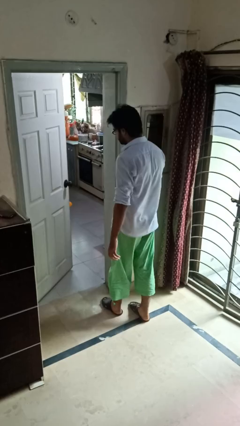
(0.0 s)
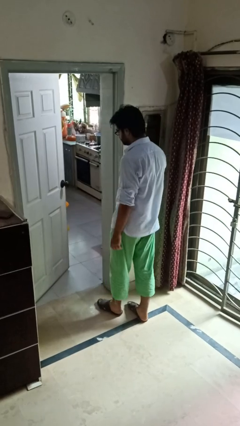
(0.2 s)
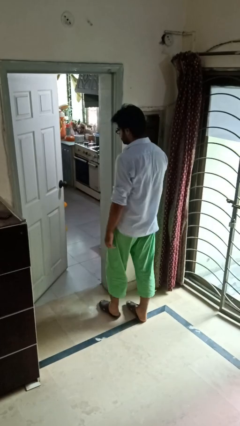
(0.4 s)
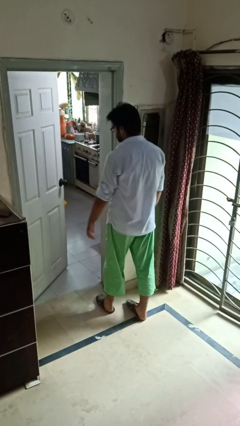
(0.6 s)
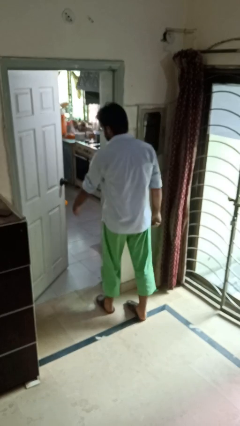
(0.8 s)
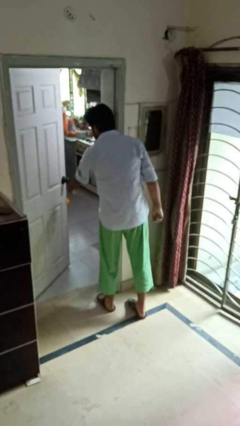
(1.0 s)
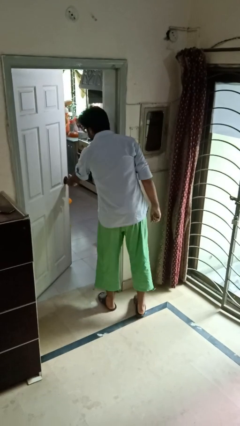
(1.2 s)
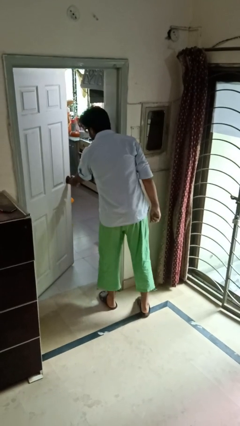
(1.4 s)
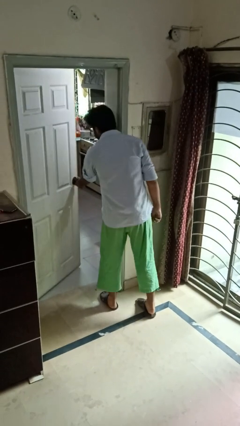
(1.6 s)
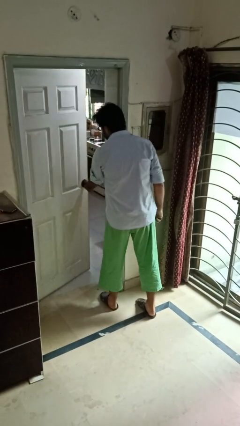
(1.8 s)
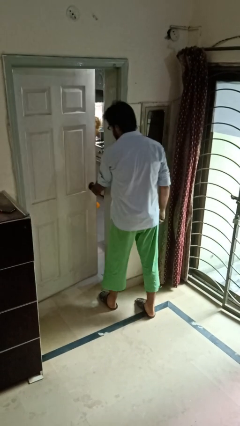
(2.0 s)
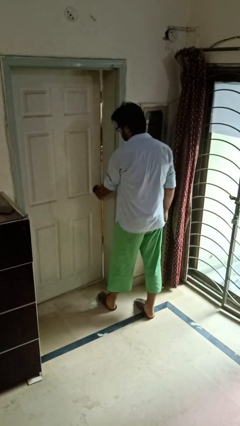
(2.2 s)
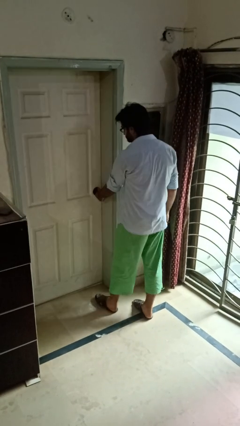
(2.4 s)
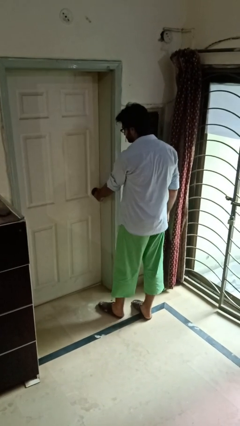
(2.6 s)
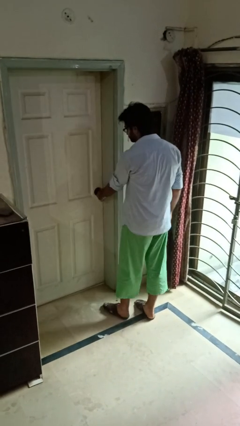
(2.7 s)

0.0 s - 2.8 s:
person closes facility door

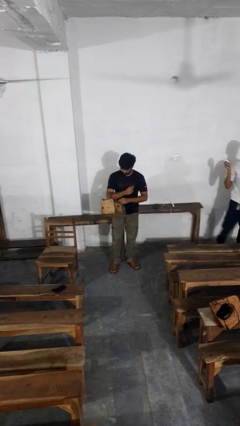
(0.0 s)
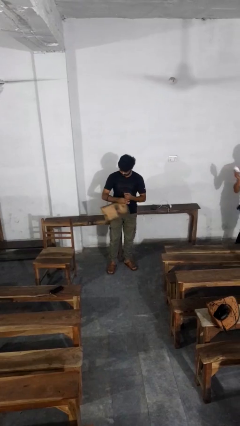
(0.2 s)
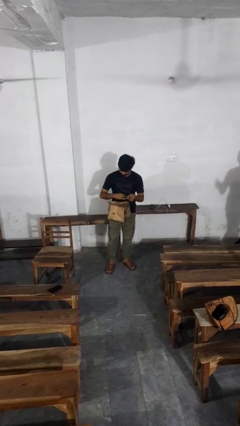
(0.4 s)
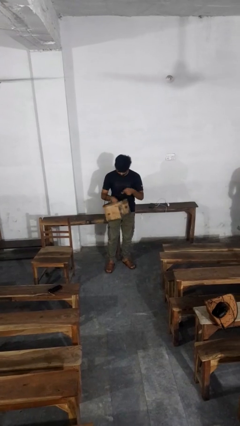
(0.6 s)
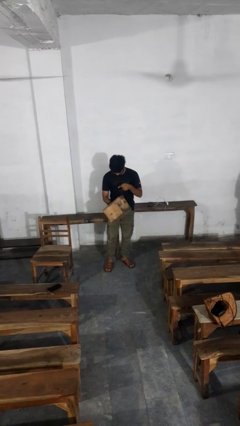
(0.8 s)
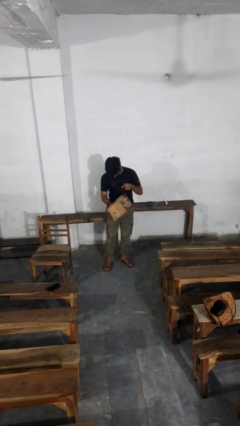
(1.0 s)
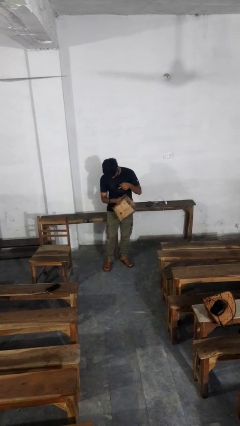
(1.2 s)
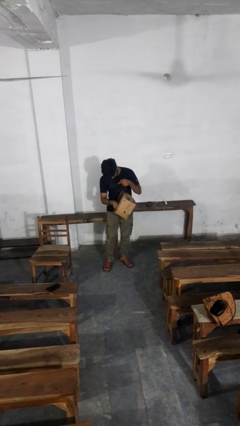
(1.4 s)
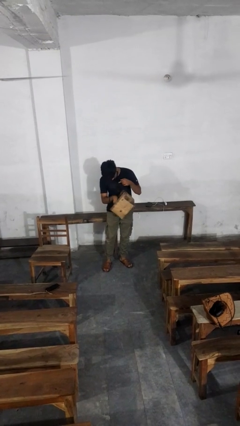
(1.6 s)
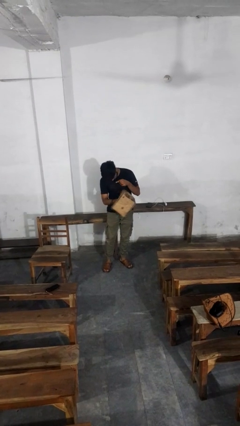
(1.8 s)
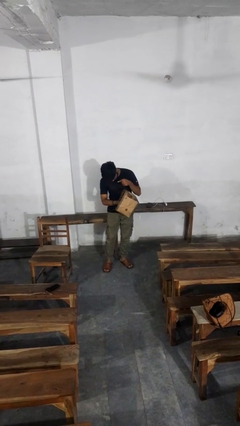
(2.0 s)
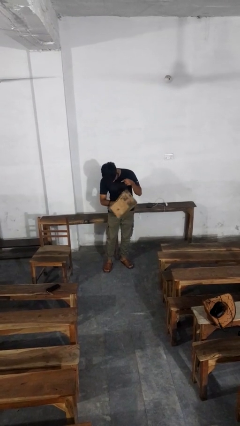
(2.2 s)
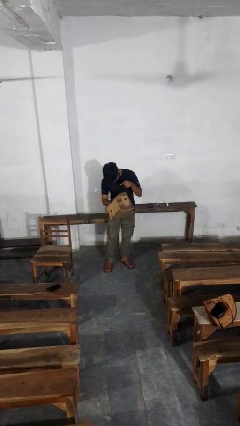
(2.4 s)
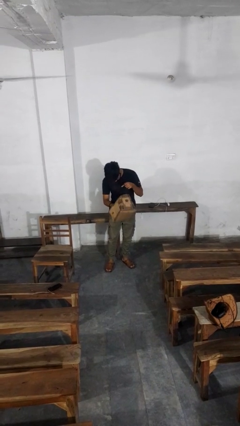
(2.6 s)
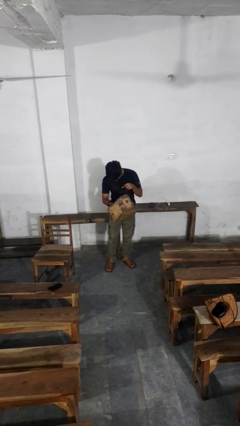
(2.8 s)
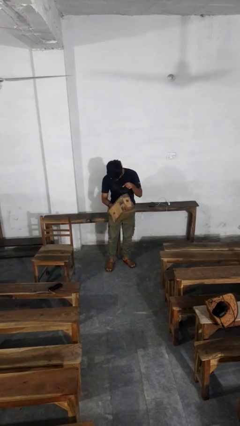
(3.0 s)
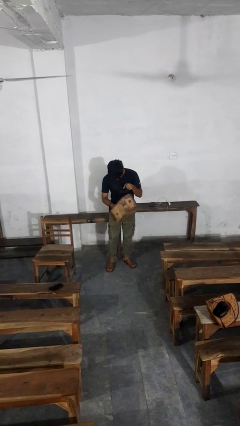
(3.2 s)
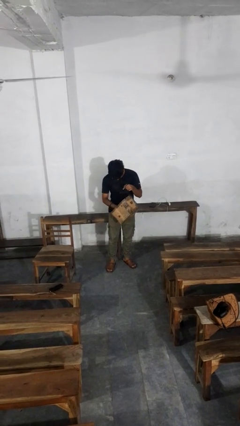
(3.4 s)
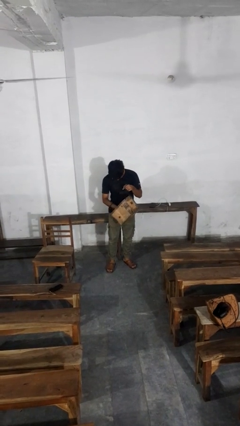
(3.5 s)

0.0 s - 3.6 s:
person searches in purse

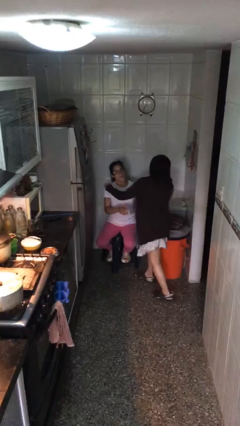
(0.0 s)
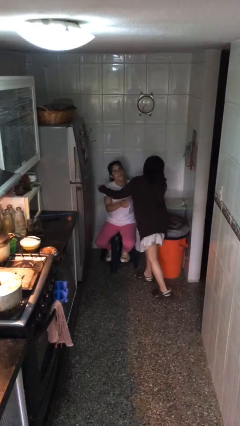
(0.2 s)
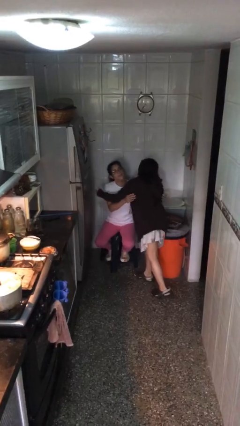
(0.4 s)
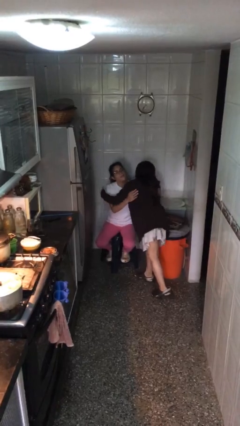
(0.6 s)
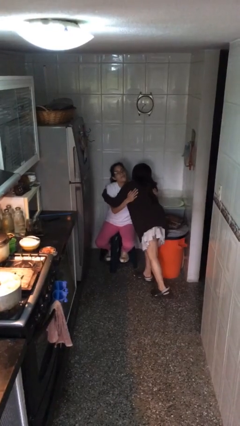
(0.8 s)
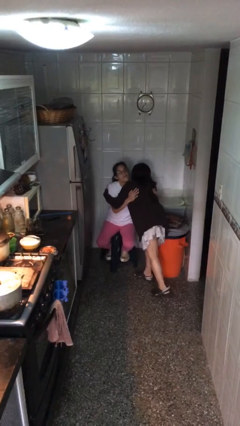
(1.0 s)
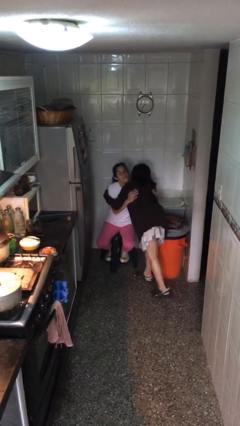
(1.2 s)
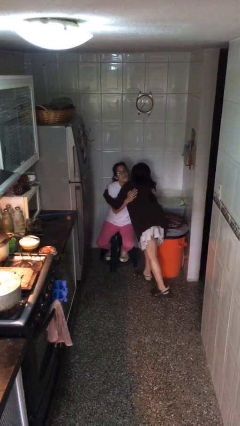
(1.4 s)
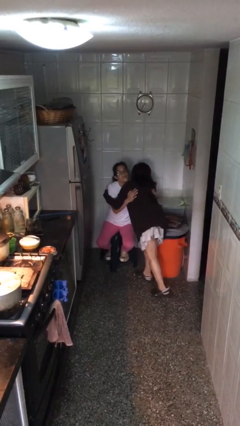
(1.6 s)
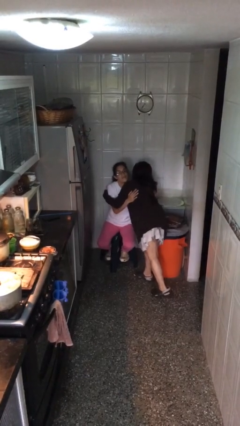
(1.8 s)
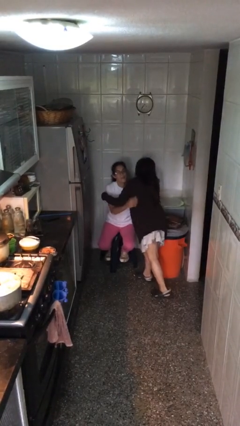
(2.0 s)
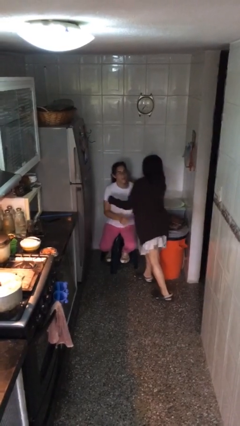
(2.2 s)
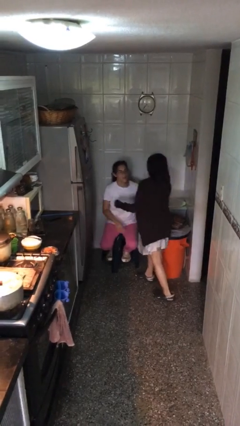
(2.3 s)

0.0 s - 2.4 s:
person embraces person

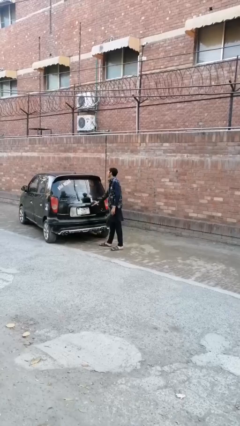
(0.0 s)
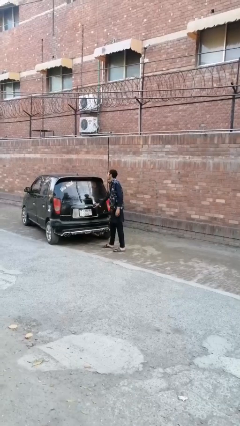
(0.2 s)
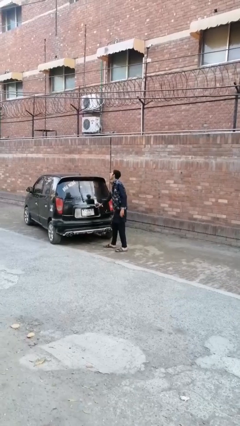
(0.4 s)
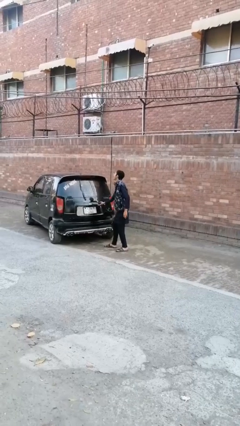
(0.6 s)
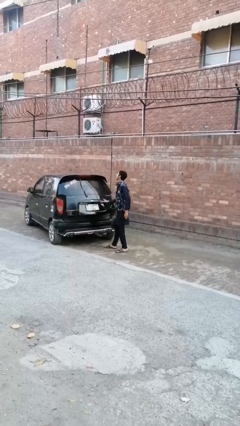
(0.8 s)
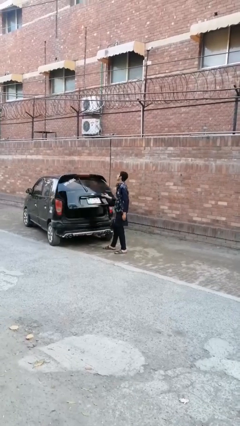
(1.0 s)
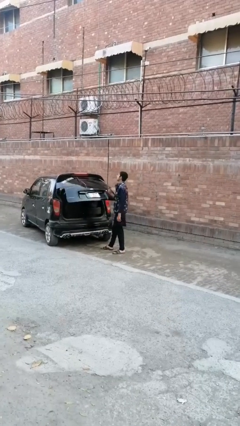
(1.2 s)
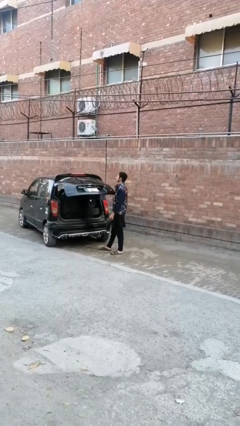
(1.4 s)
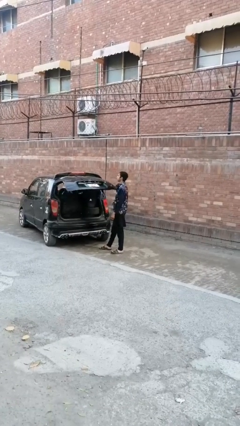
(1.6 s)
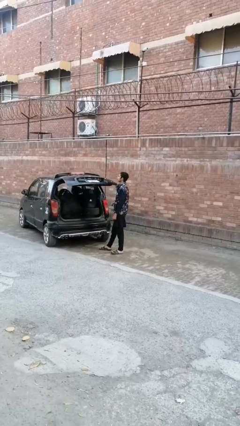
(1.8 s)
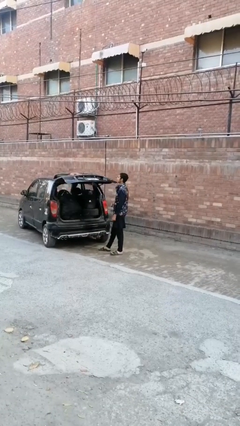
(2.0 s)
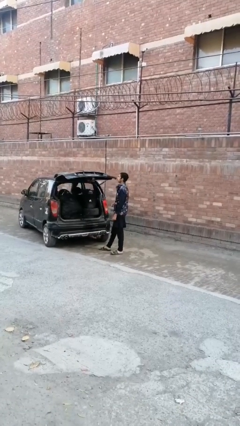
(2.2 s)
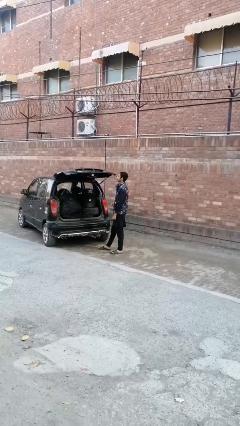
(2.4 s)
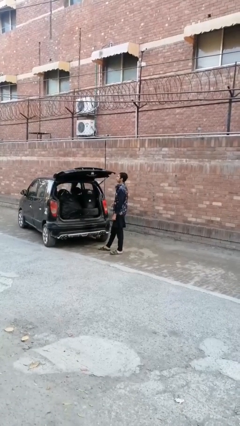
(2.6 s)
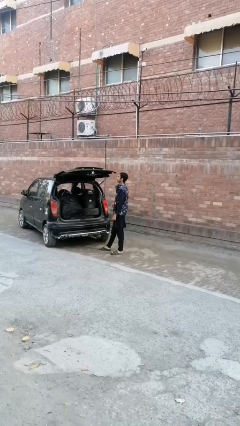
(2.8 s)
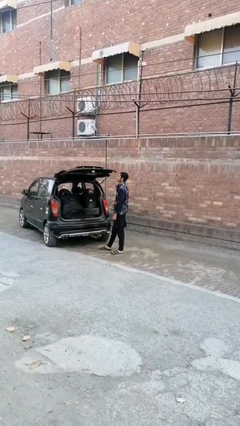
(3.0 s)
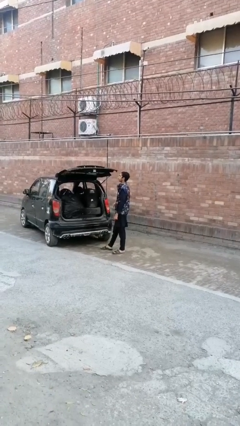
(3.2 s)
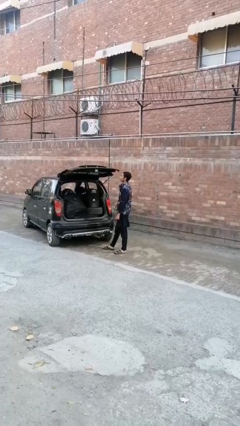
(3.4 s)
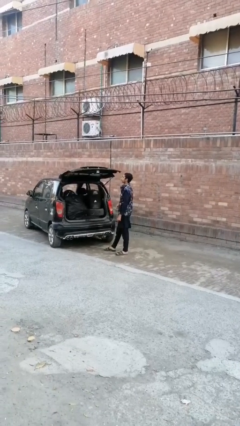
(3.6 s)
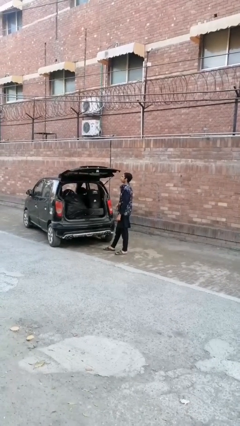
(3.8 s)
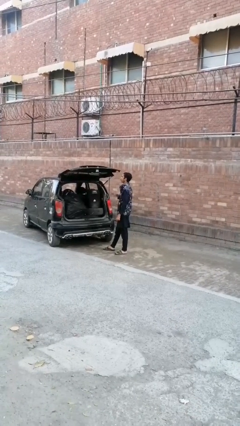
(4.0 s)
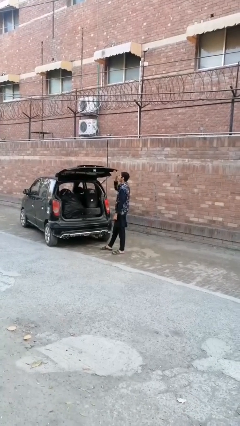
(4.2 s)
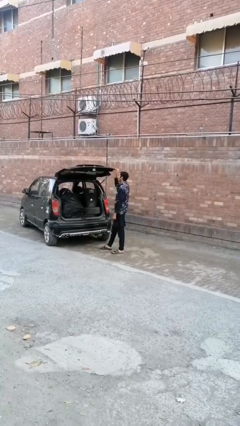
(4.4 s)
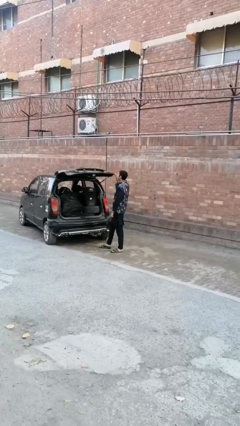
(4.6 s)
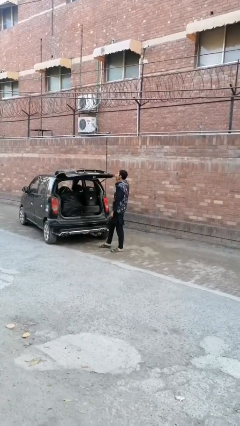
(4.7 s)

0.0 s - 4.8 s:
person opens car trunk

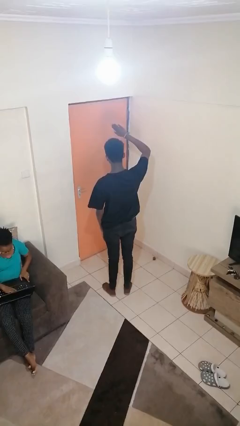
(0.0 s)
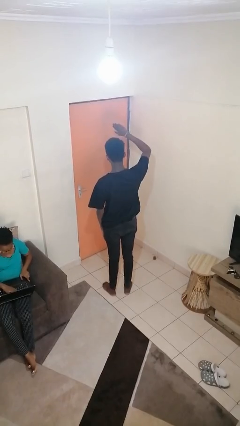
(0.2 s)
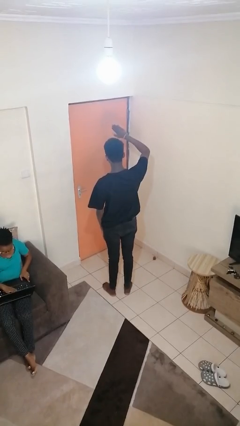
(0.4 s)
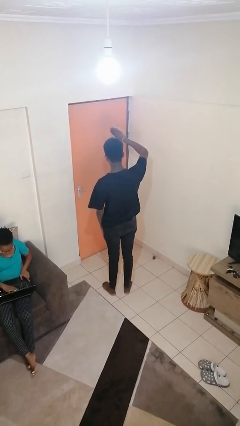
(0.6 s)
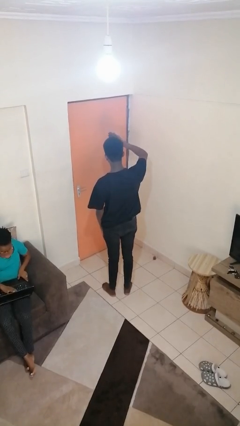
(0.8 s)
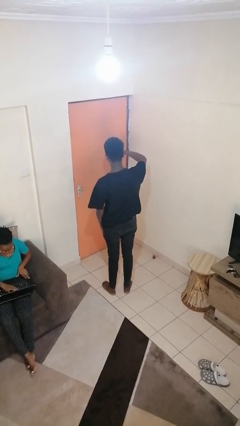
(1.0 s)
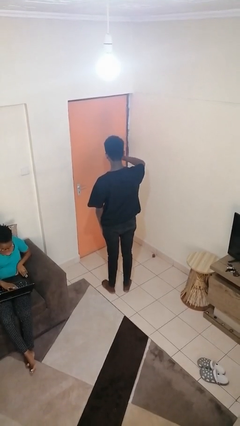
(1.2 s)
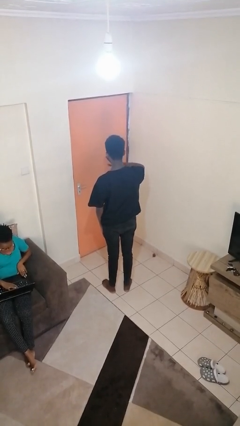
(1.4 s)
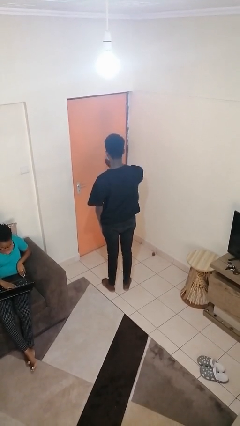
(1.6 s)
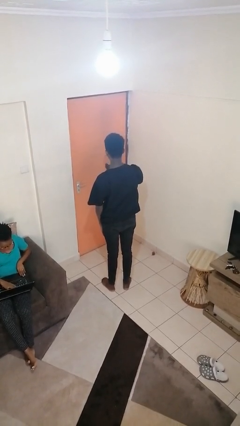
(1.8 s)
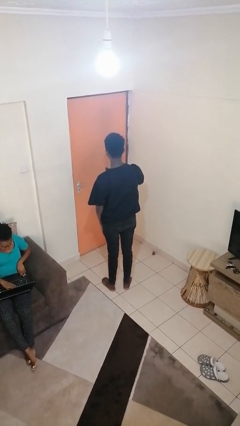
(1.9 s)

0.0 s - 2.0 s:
person gestures swipe down

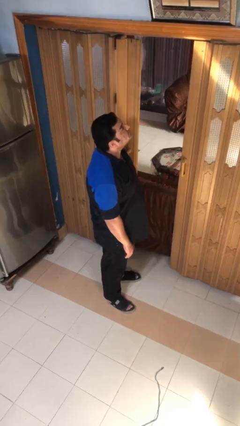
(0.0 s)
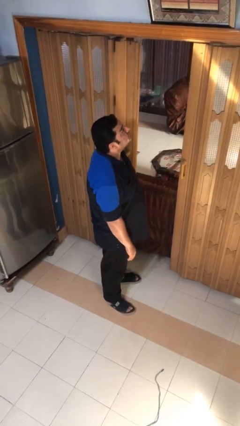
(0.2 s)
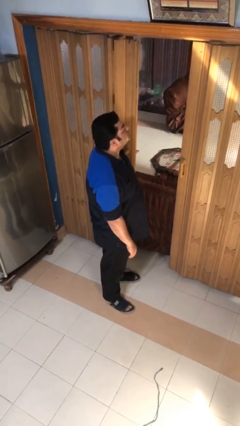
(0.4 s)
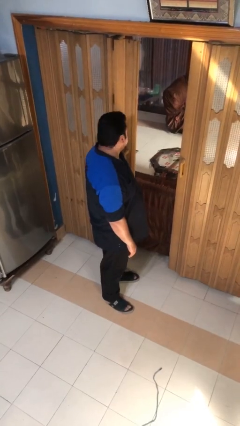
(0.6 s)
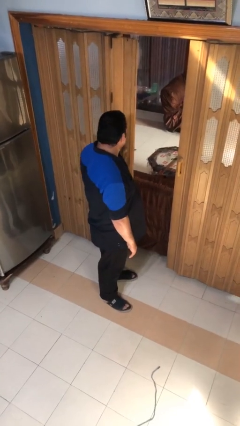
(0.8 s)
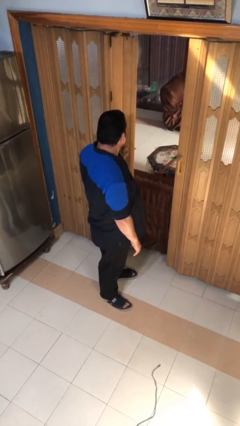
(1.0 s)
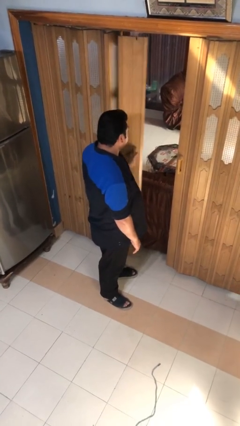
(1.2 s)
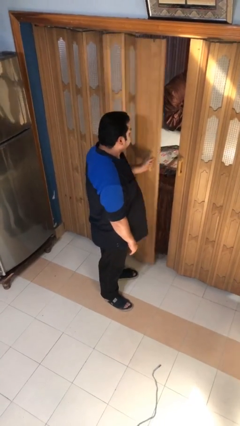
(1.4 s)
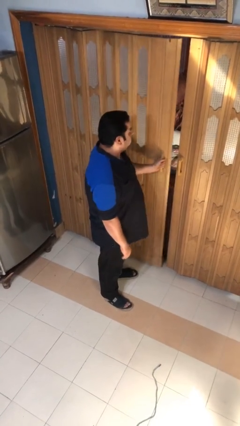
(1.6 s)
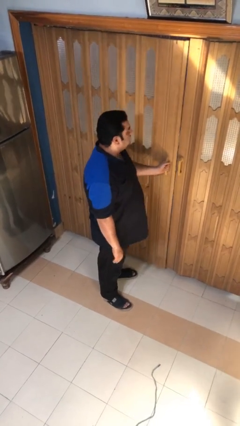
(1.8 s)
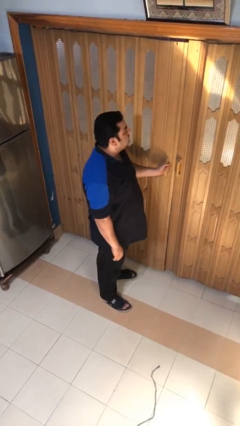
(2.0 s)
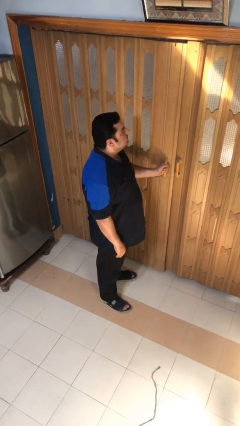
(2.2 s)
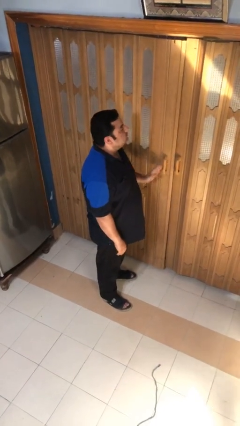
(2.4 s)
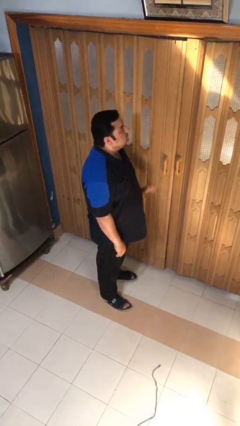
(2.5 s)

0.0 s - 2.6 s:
person closes sliding door
